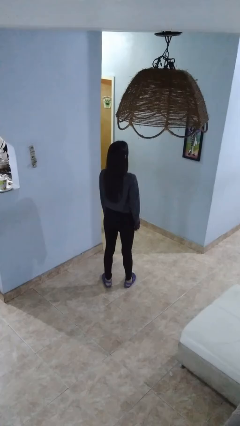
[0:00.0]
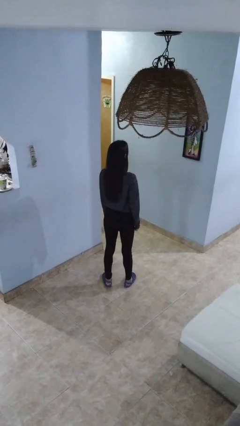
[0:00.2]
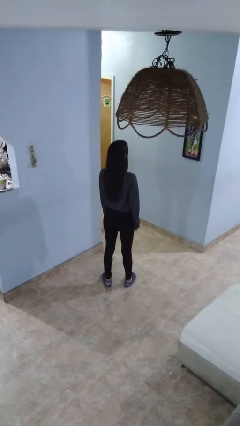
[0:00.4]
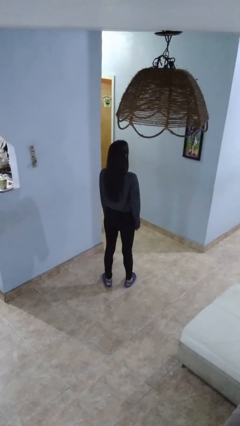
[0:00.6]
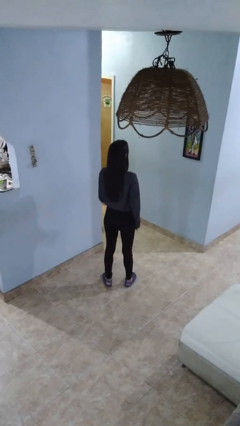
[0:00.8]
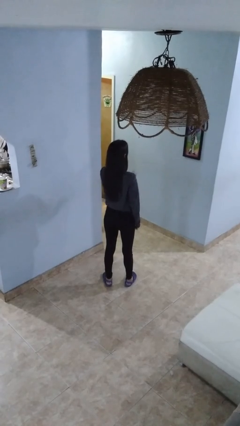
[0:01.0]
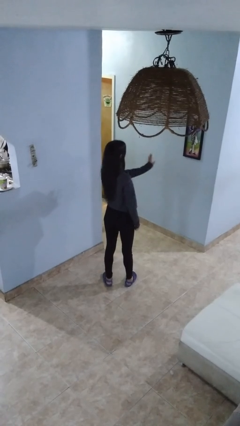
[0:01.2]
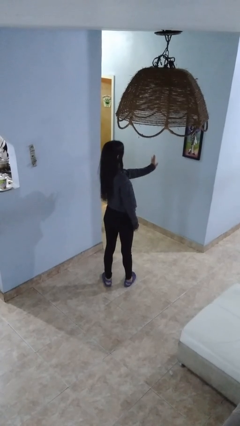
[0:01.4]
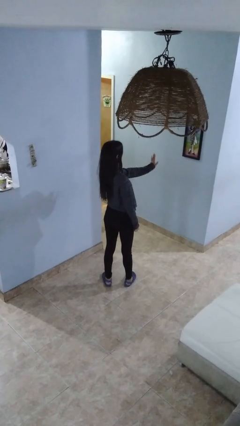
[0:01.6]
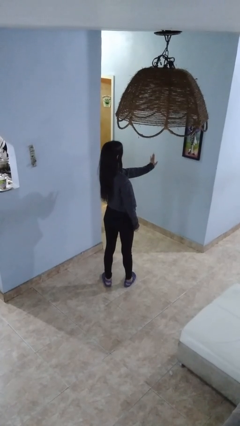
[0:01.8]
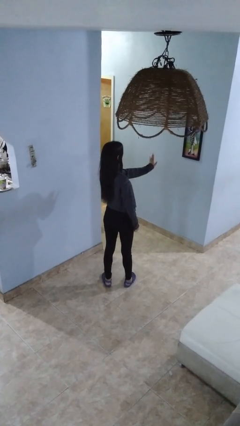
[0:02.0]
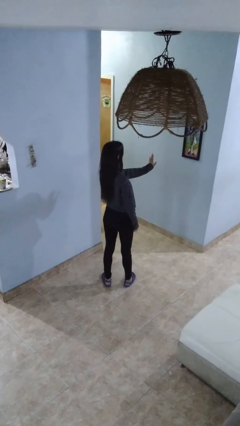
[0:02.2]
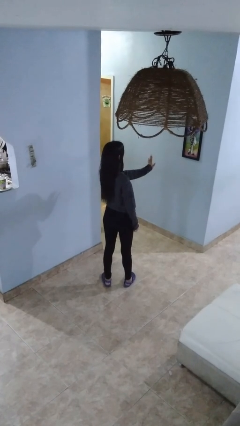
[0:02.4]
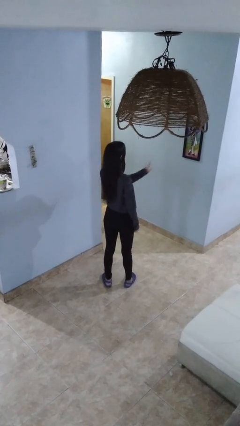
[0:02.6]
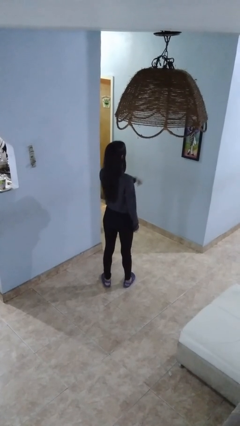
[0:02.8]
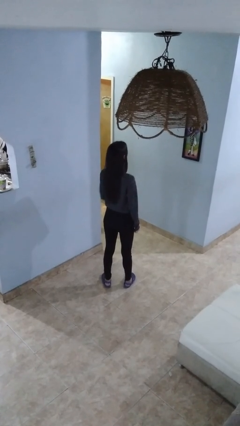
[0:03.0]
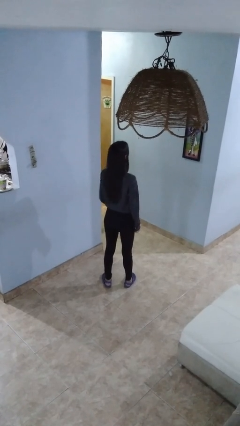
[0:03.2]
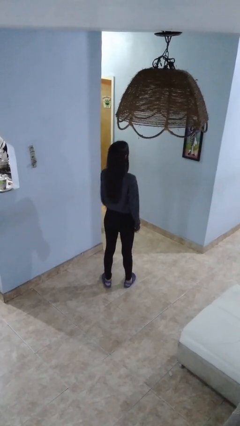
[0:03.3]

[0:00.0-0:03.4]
person gestures stop

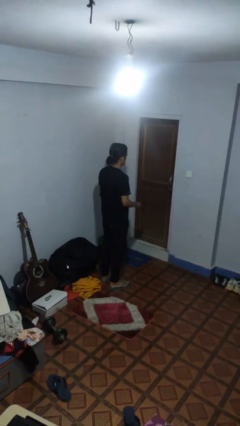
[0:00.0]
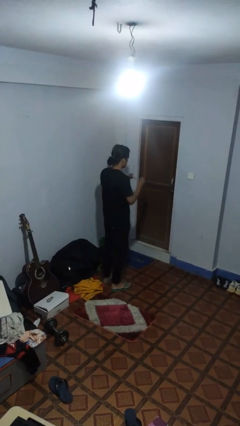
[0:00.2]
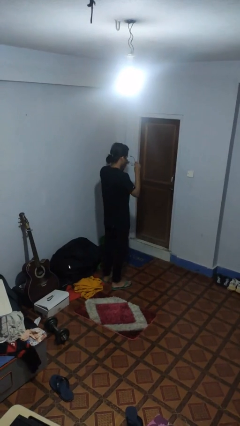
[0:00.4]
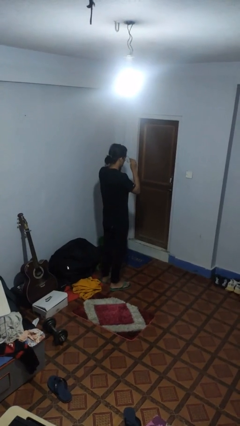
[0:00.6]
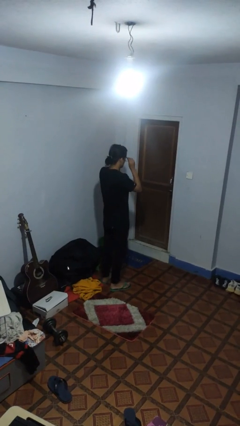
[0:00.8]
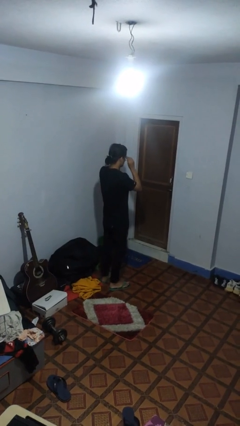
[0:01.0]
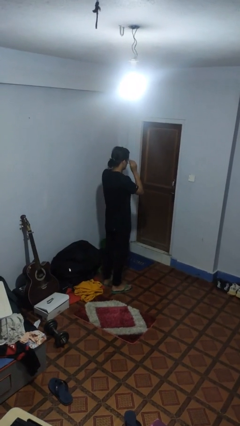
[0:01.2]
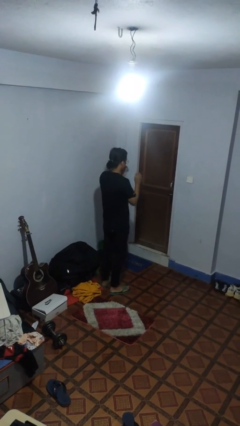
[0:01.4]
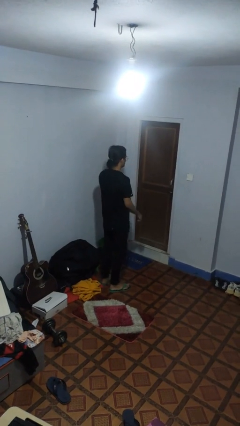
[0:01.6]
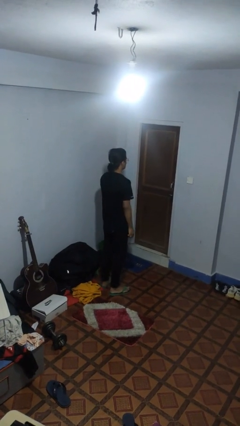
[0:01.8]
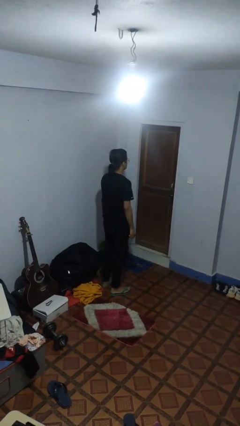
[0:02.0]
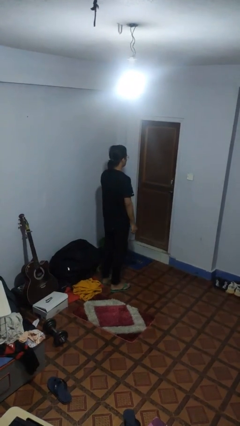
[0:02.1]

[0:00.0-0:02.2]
person puts on glasses

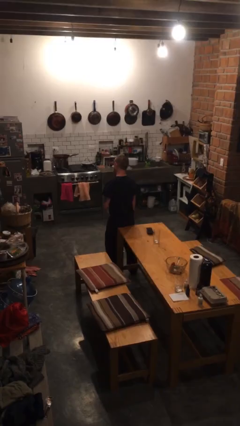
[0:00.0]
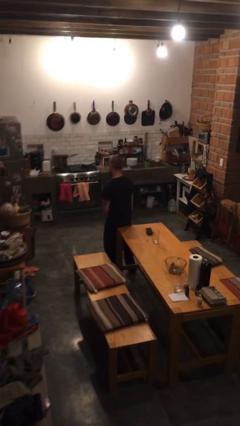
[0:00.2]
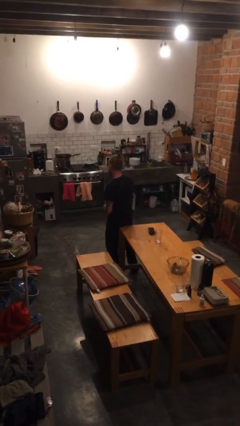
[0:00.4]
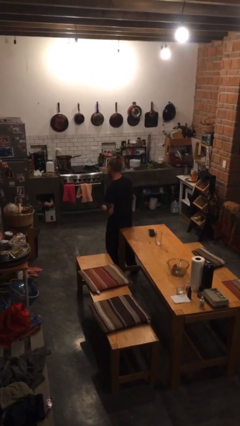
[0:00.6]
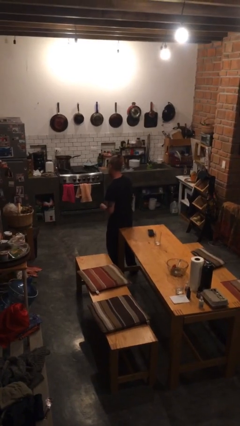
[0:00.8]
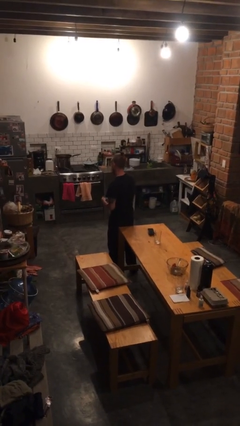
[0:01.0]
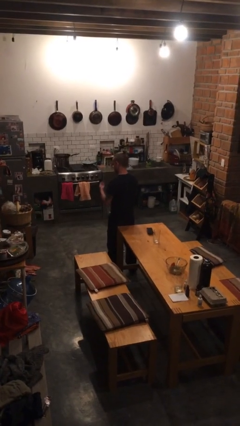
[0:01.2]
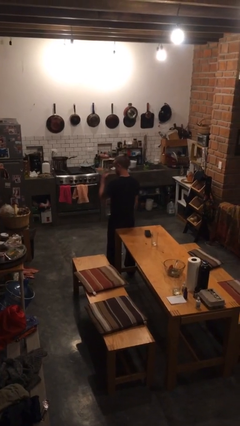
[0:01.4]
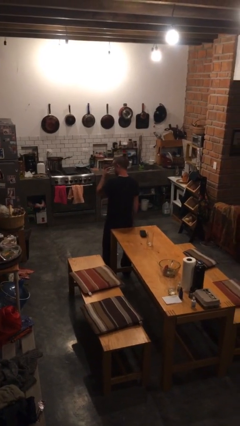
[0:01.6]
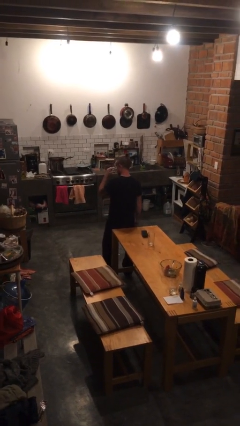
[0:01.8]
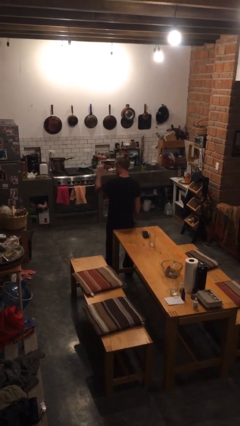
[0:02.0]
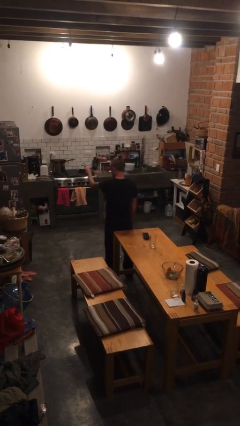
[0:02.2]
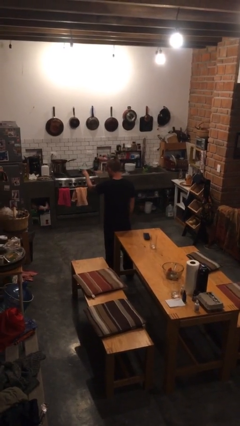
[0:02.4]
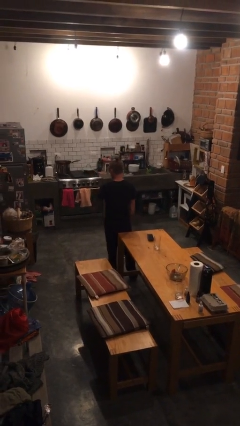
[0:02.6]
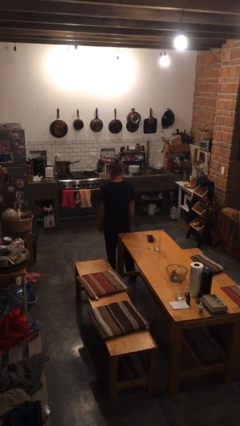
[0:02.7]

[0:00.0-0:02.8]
person gestures watch closely

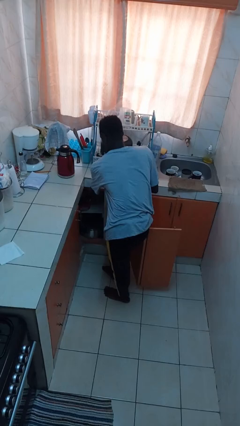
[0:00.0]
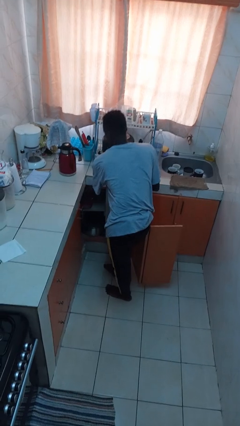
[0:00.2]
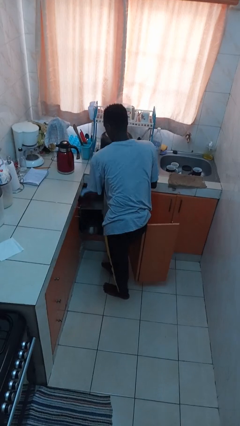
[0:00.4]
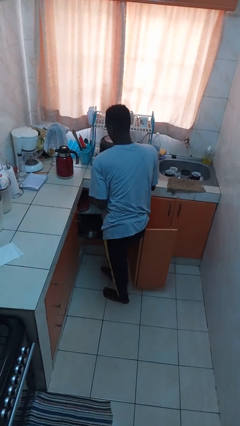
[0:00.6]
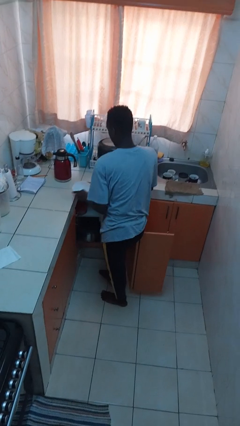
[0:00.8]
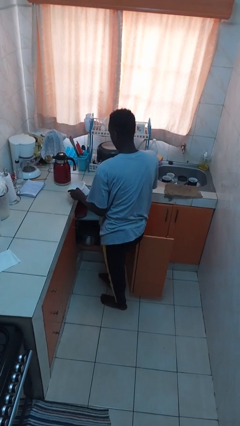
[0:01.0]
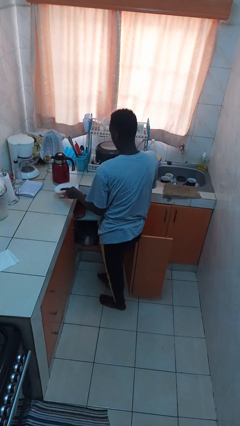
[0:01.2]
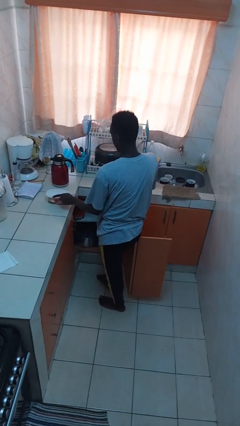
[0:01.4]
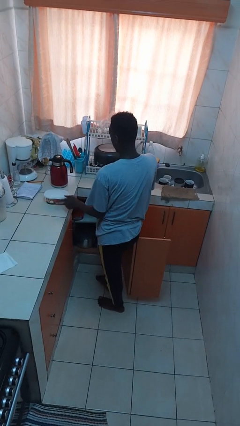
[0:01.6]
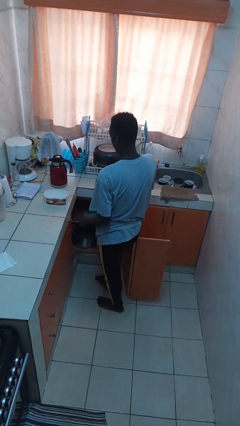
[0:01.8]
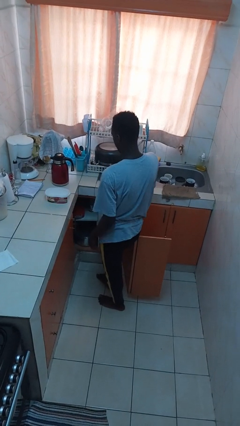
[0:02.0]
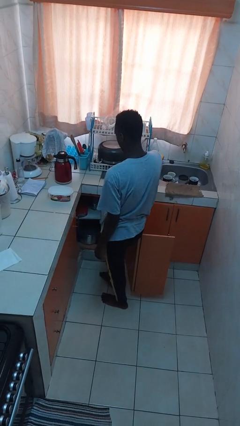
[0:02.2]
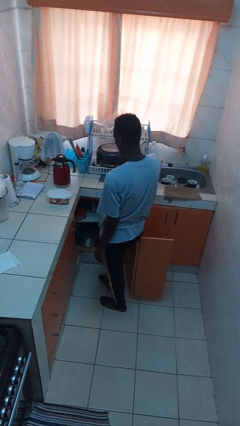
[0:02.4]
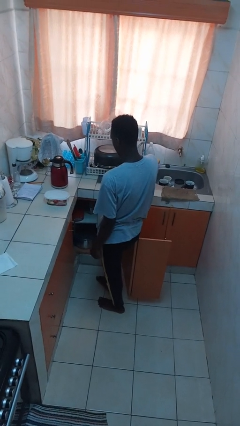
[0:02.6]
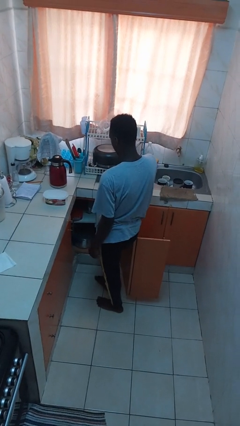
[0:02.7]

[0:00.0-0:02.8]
person takes object from cabinet

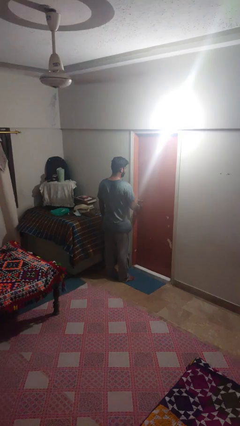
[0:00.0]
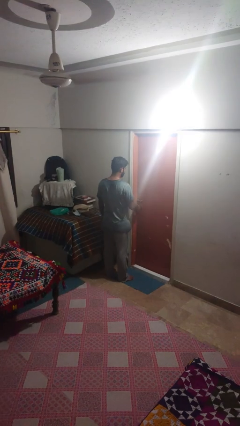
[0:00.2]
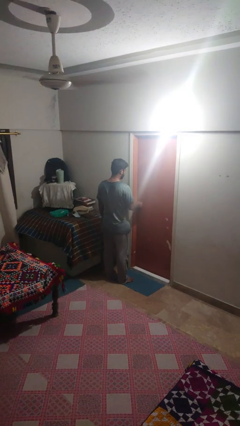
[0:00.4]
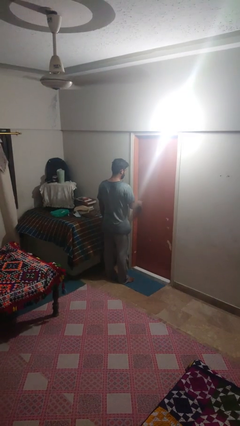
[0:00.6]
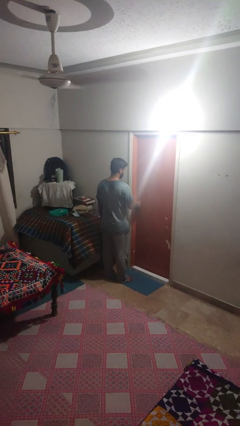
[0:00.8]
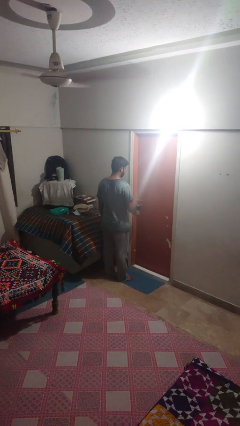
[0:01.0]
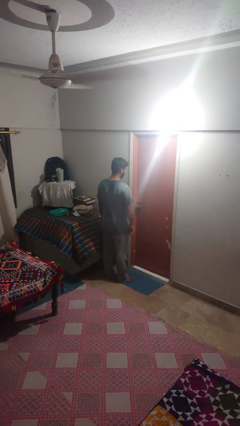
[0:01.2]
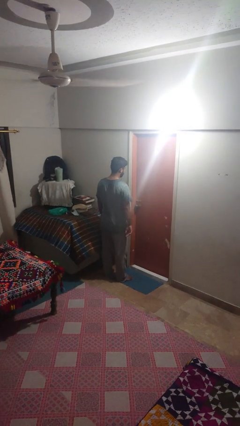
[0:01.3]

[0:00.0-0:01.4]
person locks door with keys

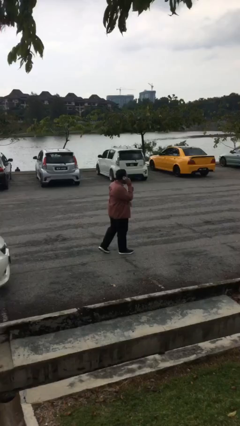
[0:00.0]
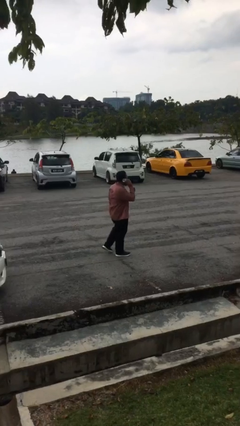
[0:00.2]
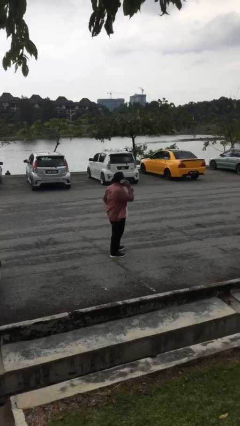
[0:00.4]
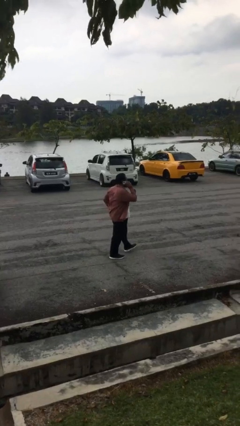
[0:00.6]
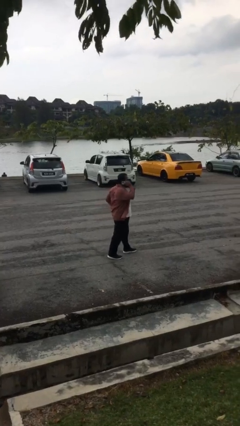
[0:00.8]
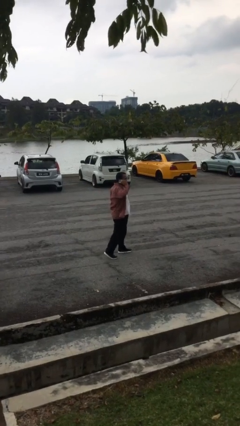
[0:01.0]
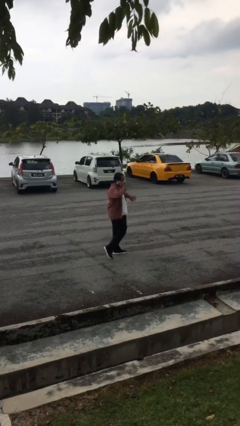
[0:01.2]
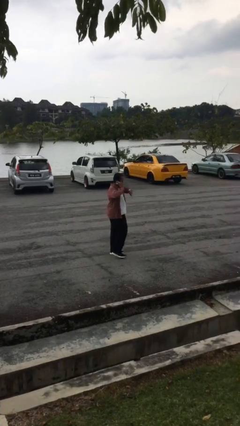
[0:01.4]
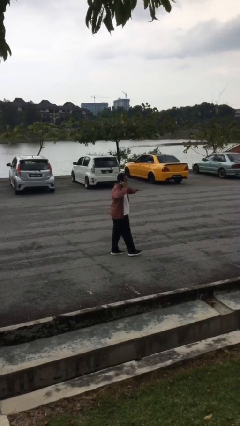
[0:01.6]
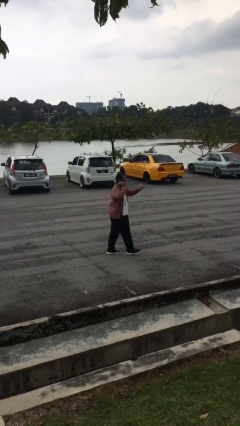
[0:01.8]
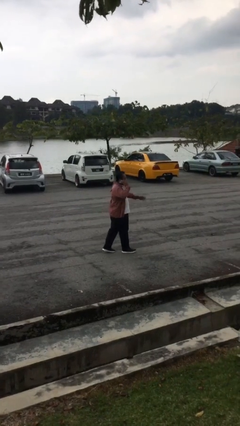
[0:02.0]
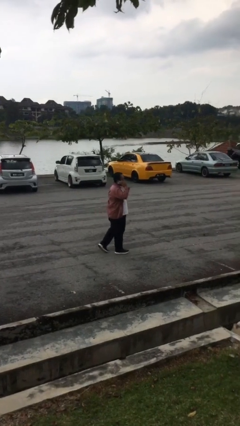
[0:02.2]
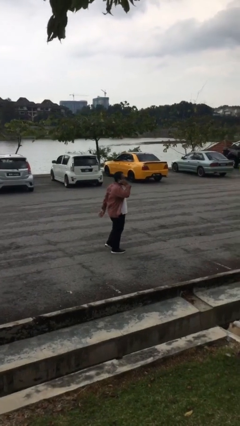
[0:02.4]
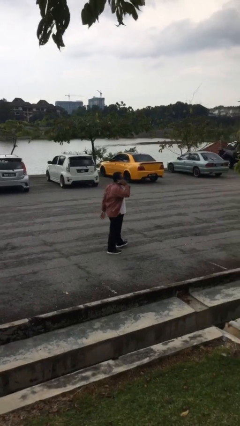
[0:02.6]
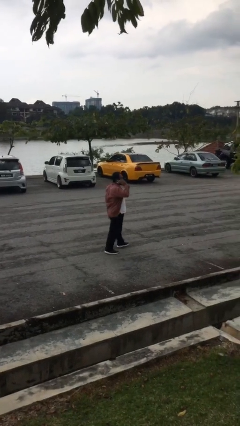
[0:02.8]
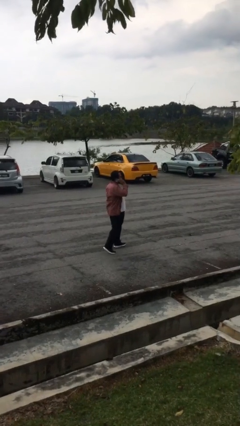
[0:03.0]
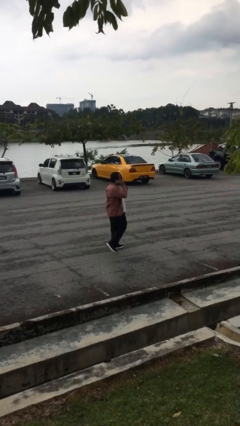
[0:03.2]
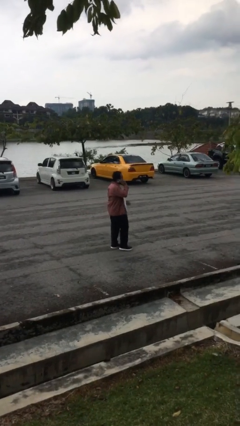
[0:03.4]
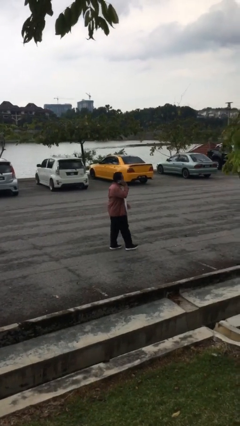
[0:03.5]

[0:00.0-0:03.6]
person talks on phone

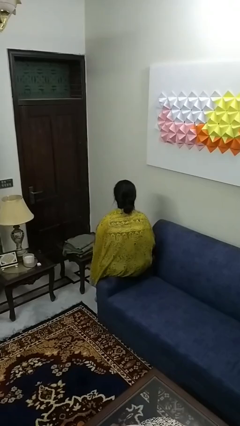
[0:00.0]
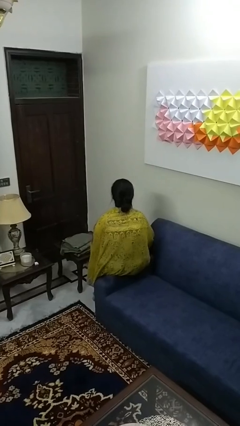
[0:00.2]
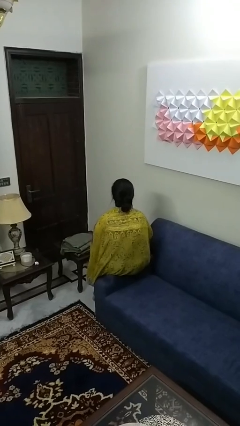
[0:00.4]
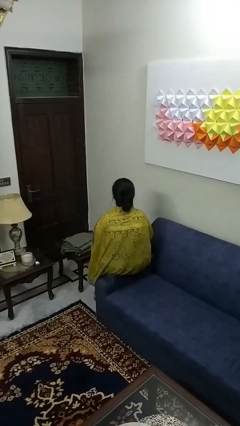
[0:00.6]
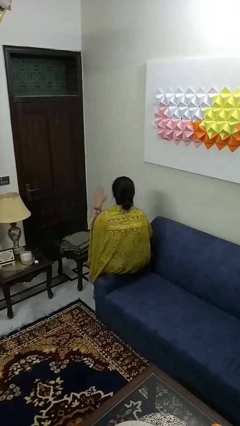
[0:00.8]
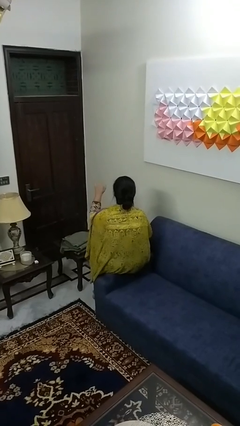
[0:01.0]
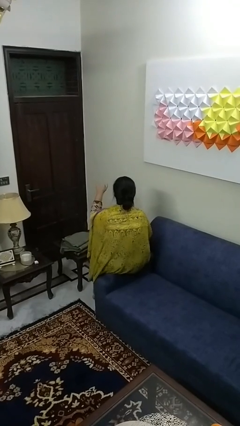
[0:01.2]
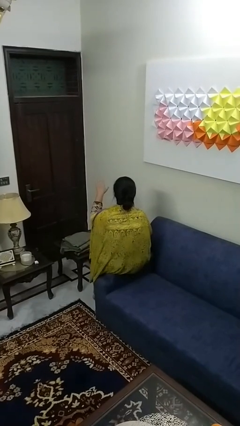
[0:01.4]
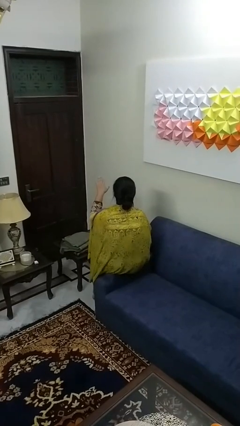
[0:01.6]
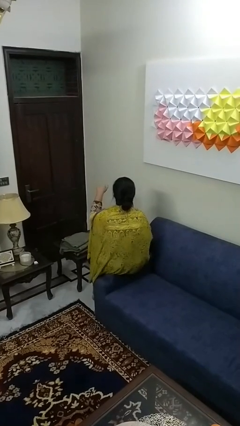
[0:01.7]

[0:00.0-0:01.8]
person gestures come here
